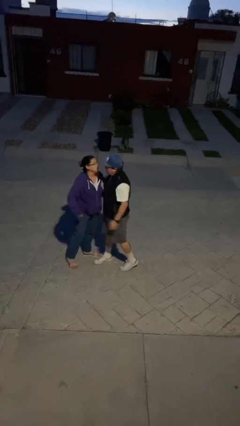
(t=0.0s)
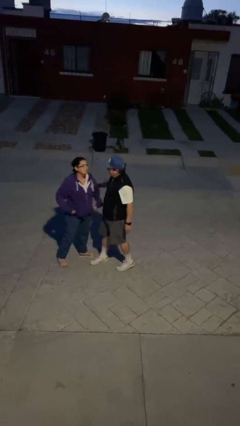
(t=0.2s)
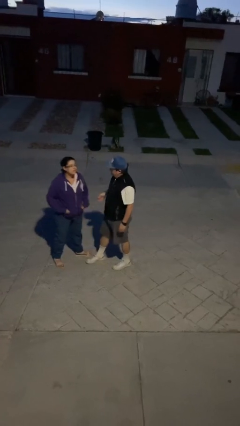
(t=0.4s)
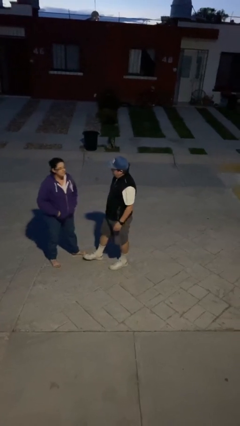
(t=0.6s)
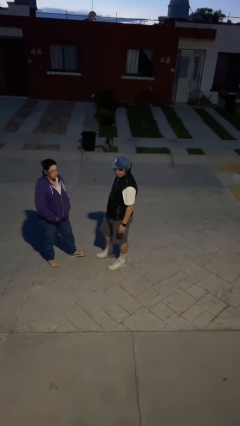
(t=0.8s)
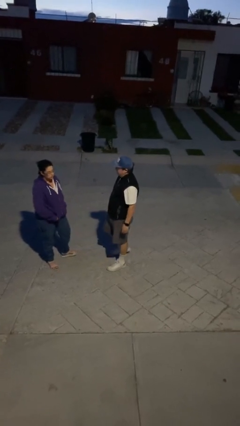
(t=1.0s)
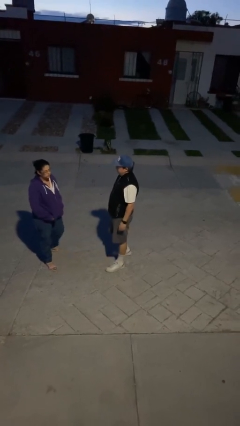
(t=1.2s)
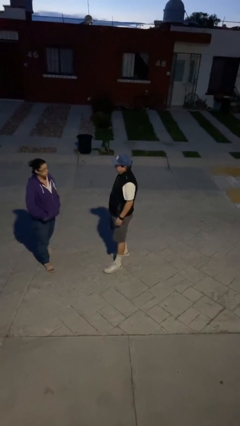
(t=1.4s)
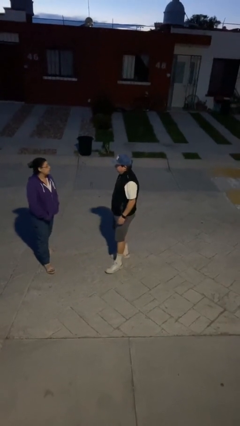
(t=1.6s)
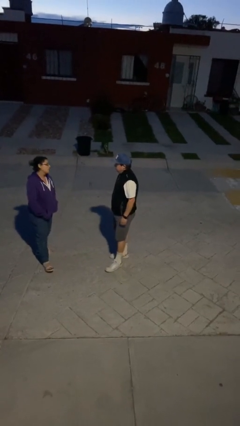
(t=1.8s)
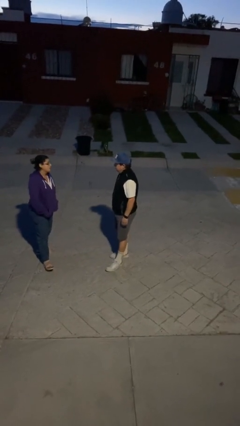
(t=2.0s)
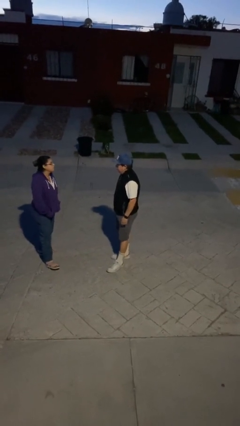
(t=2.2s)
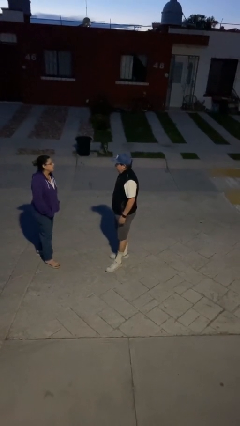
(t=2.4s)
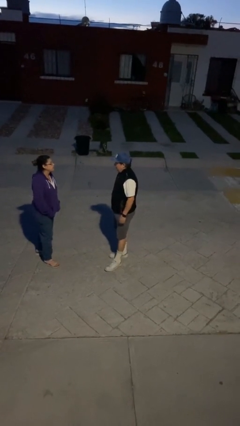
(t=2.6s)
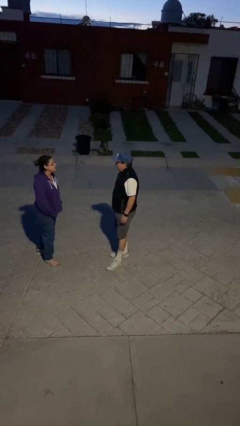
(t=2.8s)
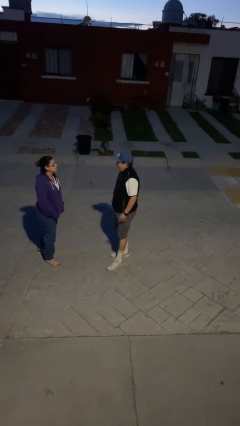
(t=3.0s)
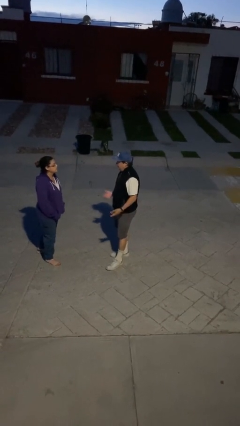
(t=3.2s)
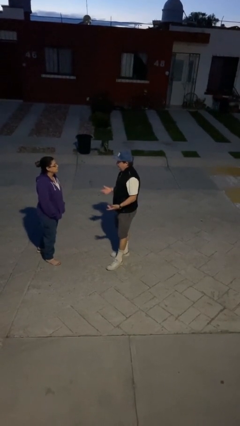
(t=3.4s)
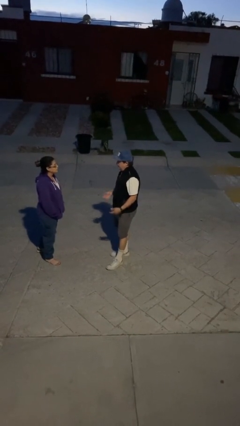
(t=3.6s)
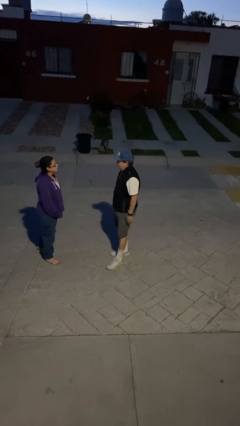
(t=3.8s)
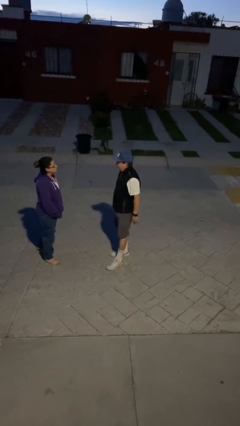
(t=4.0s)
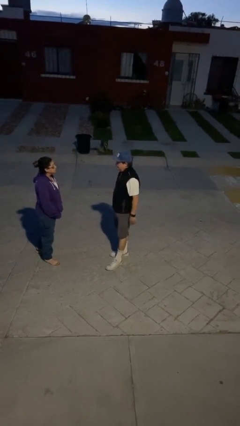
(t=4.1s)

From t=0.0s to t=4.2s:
person talks to person

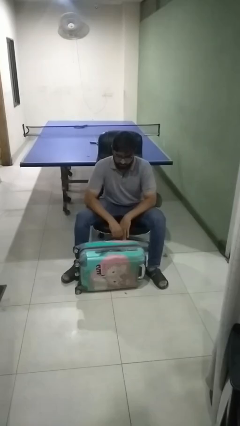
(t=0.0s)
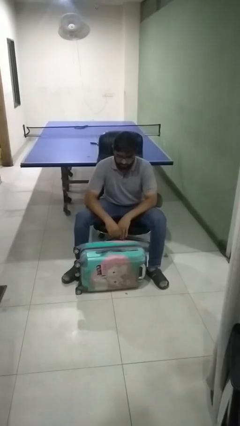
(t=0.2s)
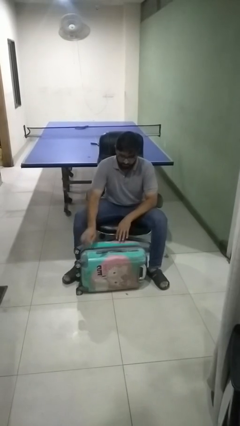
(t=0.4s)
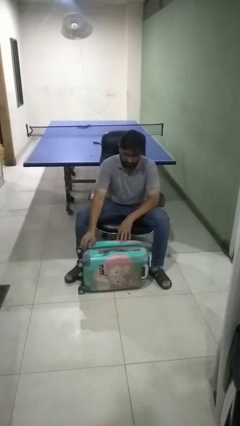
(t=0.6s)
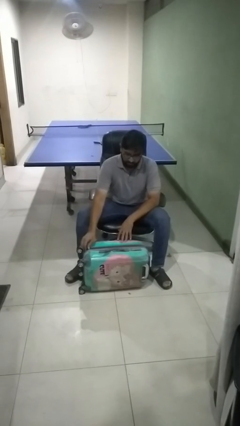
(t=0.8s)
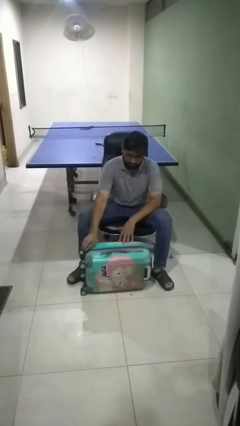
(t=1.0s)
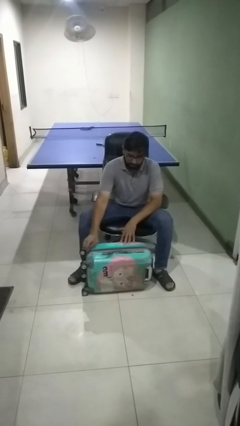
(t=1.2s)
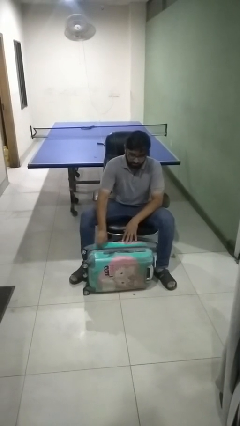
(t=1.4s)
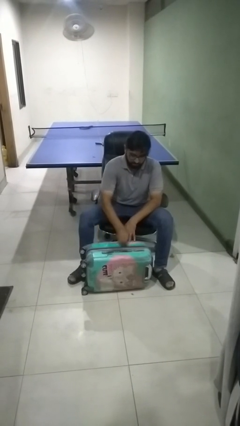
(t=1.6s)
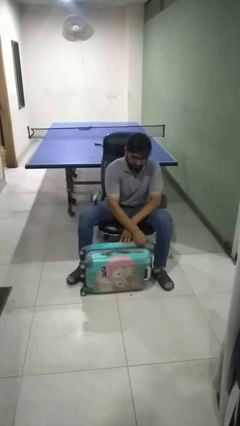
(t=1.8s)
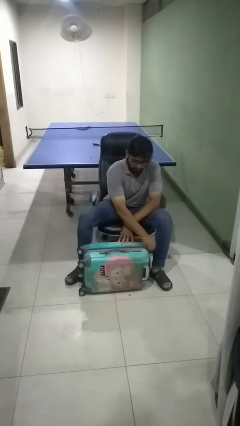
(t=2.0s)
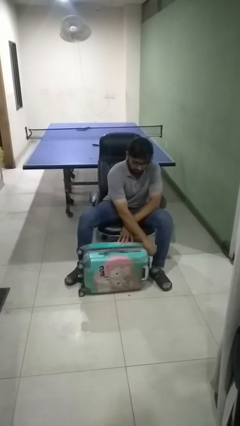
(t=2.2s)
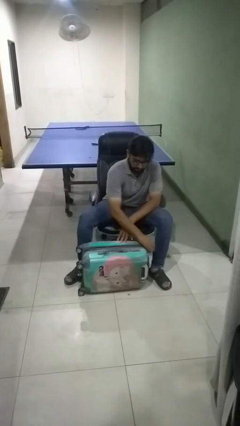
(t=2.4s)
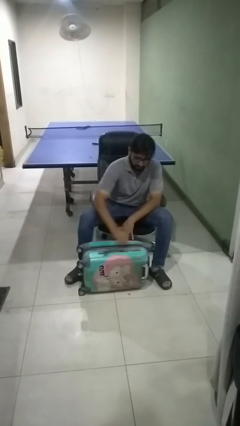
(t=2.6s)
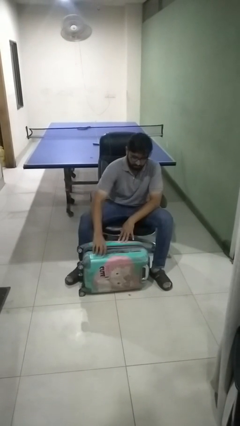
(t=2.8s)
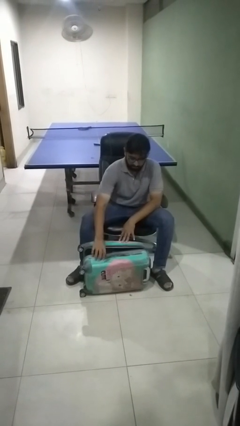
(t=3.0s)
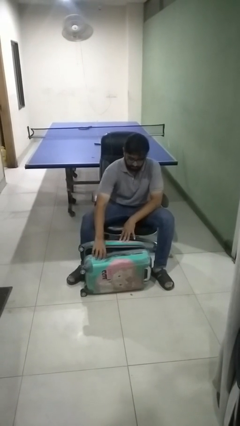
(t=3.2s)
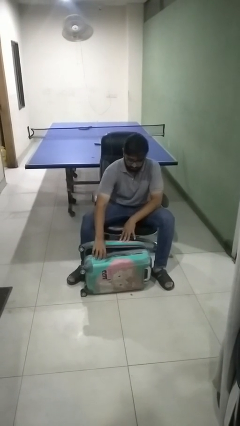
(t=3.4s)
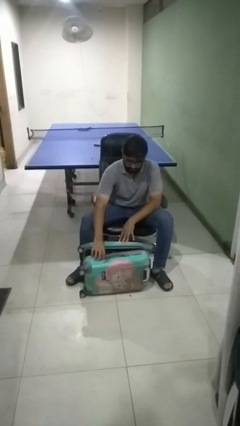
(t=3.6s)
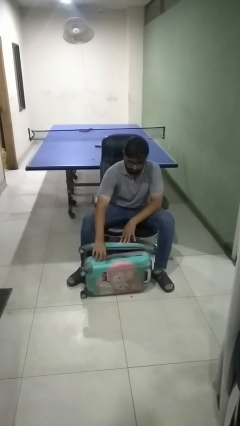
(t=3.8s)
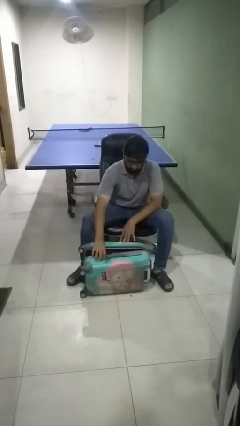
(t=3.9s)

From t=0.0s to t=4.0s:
person opens suitcase

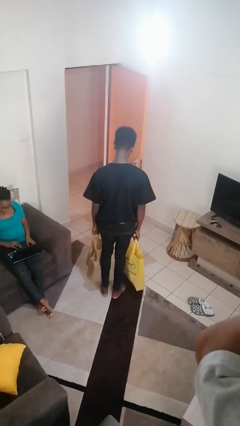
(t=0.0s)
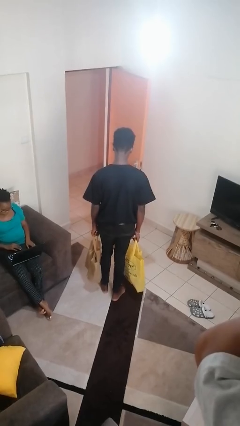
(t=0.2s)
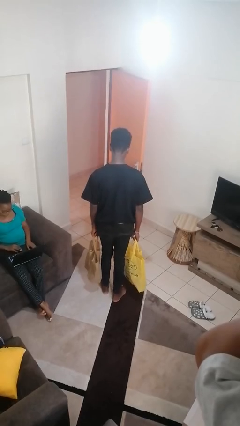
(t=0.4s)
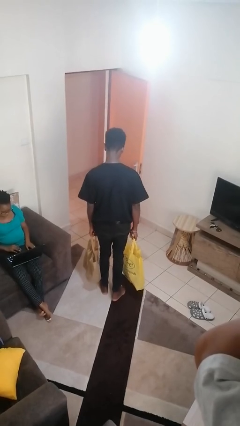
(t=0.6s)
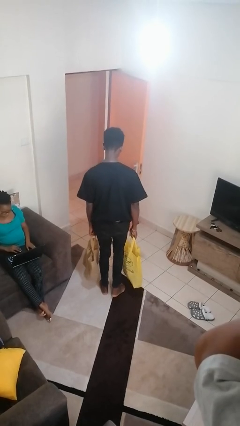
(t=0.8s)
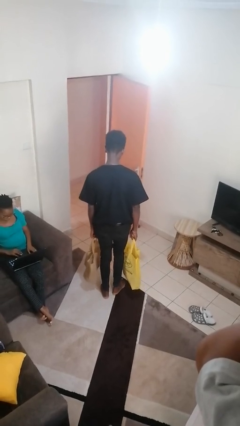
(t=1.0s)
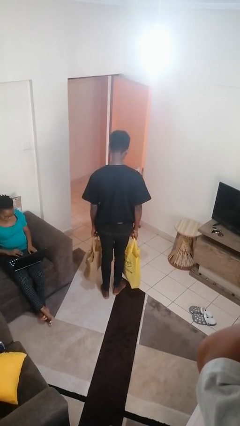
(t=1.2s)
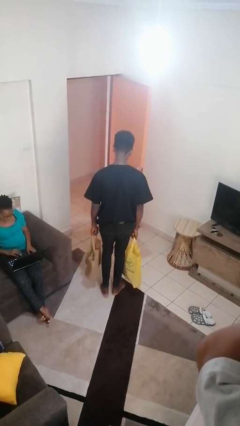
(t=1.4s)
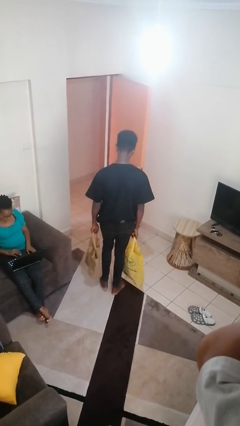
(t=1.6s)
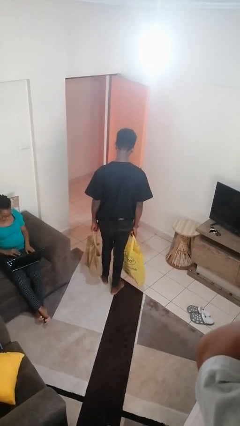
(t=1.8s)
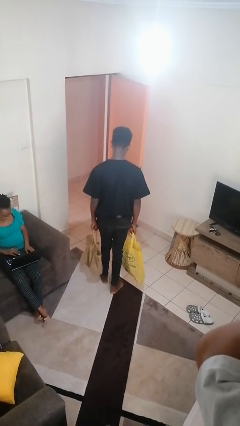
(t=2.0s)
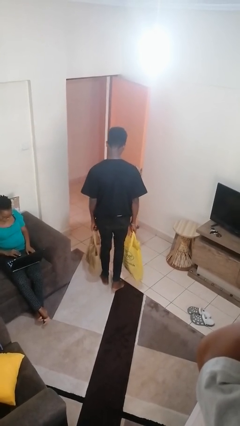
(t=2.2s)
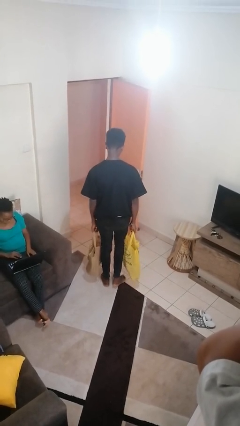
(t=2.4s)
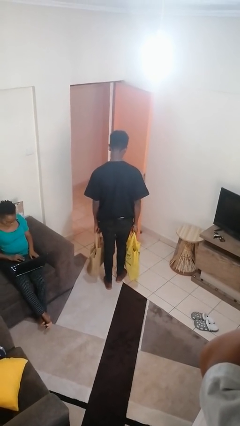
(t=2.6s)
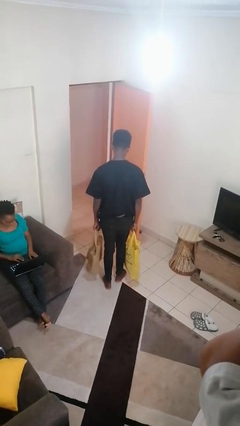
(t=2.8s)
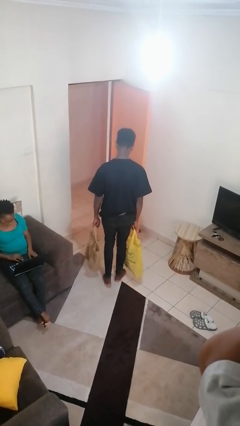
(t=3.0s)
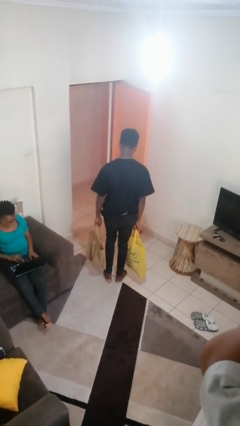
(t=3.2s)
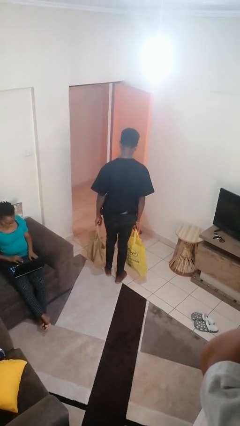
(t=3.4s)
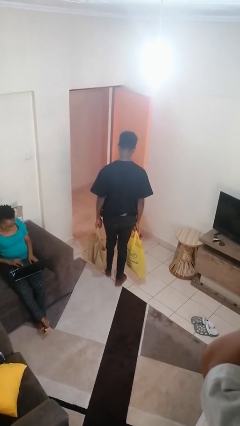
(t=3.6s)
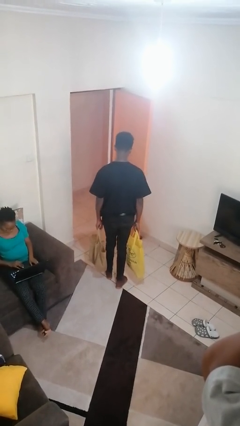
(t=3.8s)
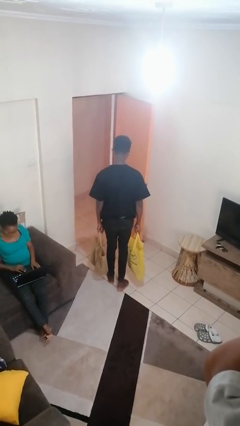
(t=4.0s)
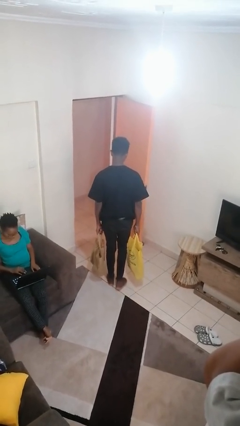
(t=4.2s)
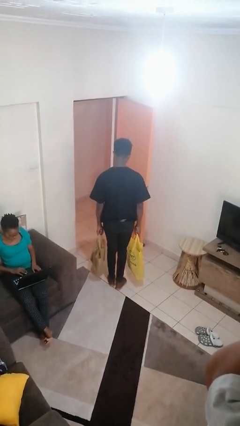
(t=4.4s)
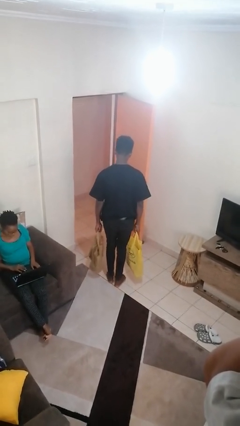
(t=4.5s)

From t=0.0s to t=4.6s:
person carries groceries

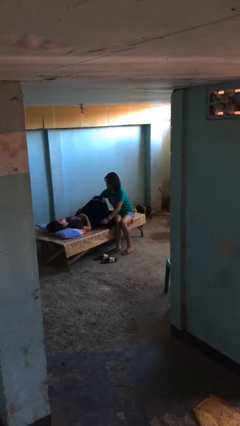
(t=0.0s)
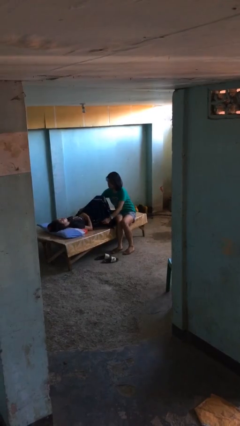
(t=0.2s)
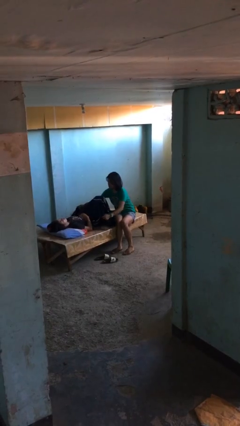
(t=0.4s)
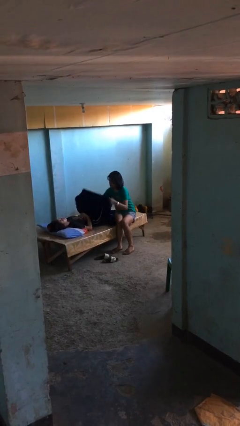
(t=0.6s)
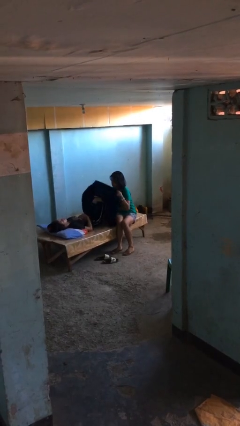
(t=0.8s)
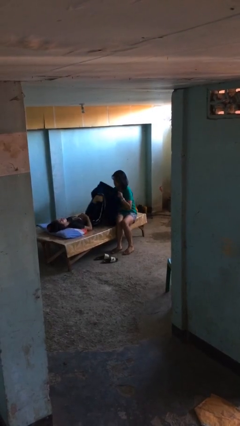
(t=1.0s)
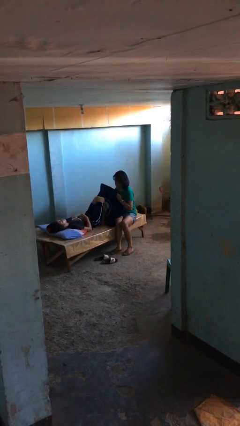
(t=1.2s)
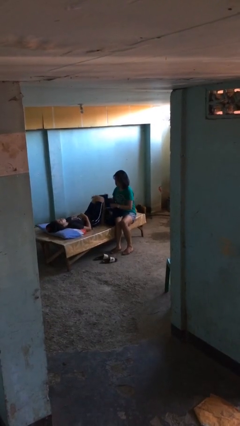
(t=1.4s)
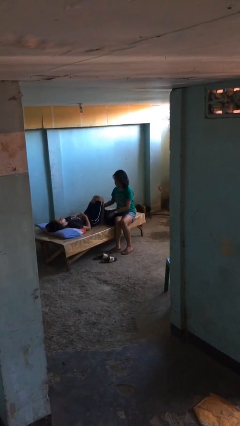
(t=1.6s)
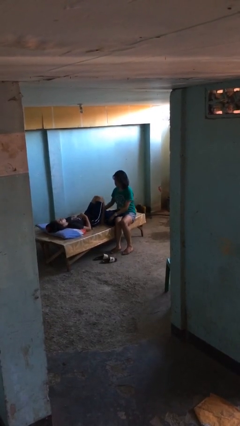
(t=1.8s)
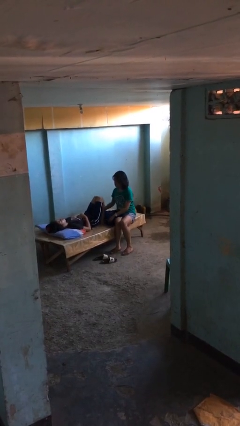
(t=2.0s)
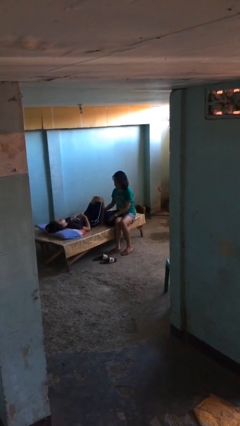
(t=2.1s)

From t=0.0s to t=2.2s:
person uncovers friend with blanket

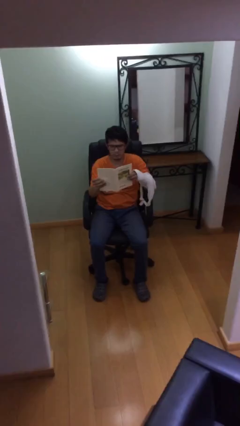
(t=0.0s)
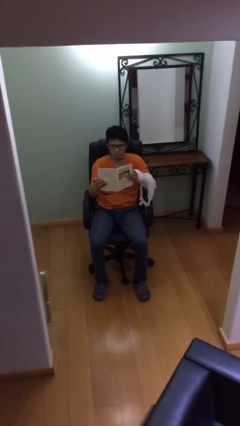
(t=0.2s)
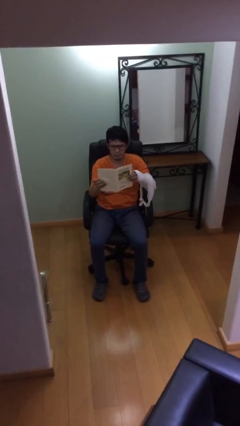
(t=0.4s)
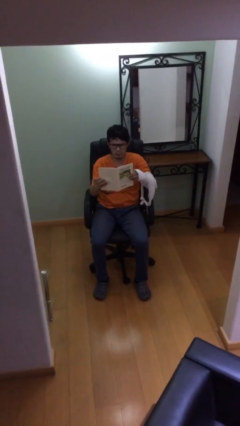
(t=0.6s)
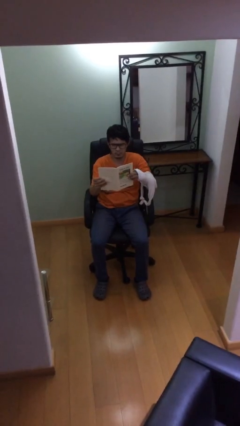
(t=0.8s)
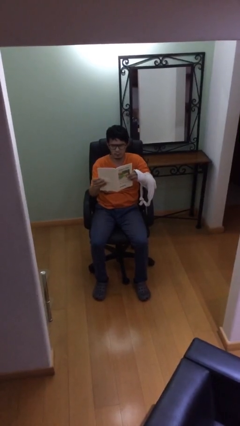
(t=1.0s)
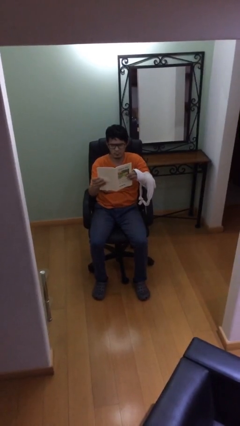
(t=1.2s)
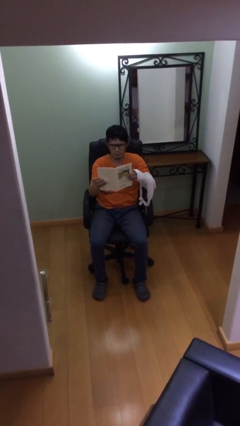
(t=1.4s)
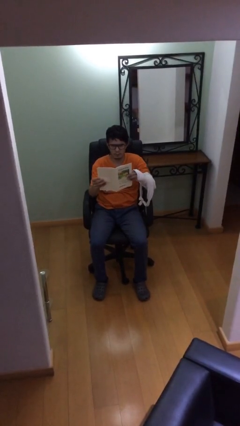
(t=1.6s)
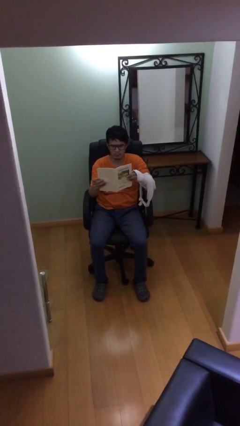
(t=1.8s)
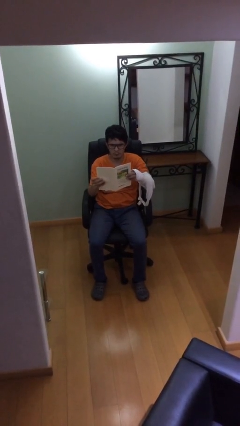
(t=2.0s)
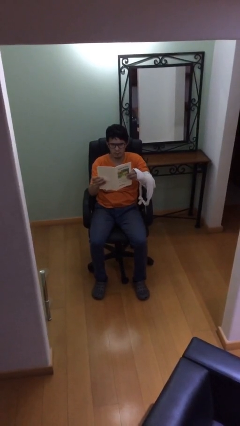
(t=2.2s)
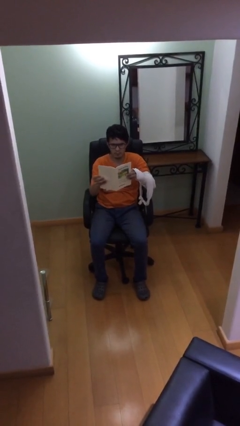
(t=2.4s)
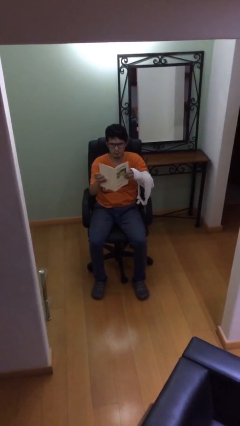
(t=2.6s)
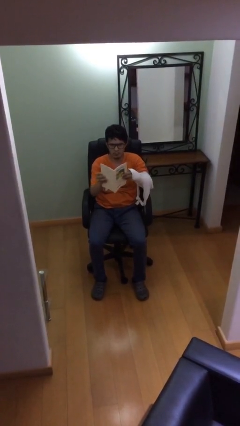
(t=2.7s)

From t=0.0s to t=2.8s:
person reads document
